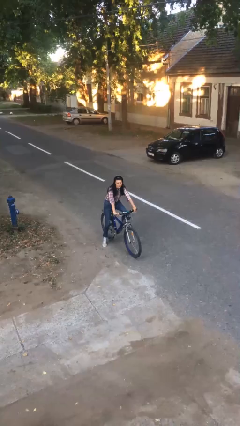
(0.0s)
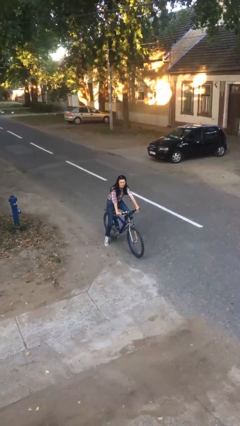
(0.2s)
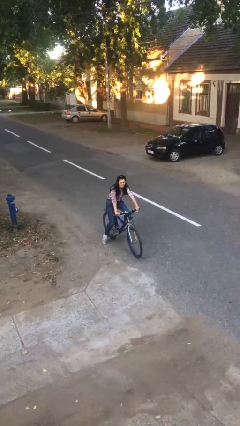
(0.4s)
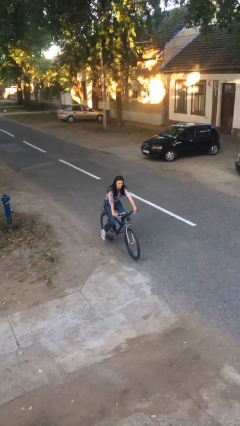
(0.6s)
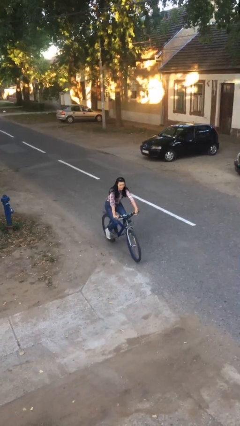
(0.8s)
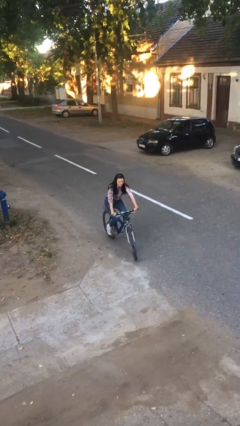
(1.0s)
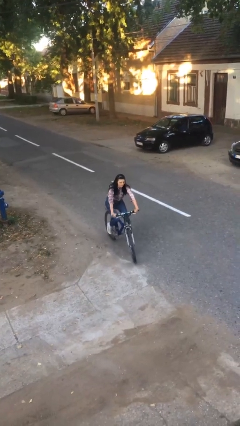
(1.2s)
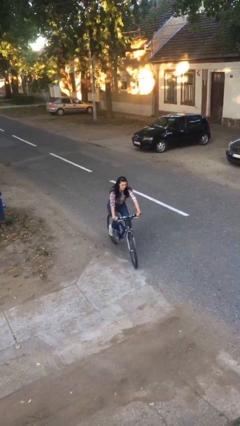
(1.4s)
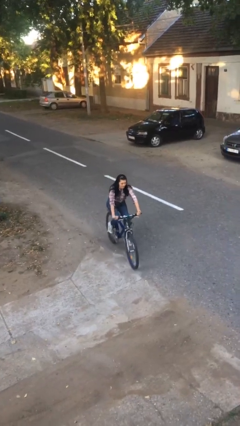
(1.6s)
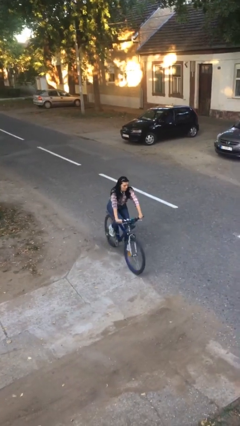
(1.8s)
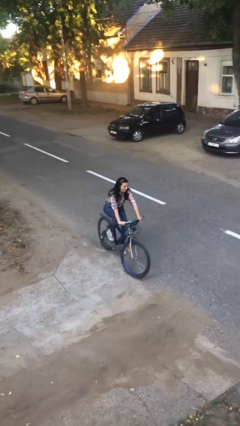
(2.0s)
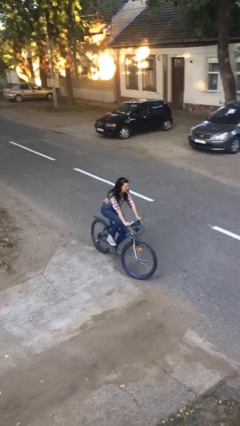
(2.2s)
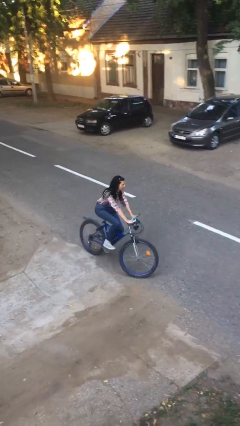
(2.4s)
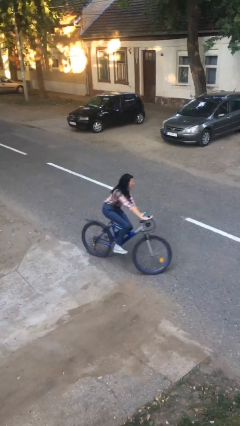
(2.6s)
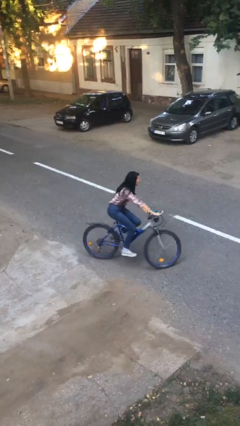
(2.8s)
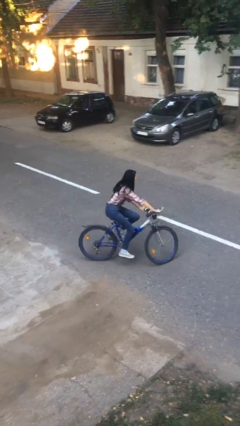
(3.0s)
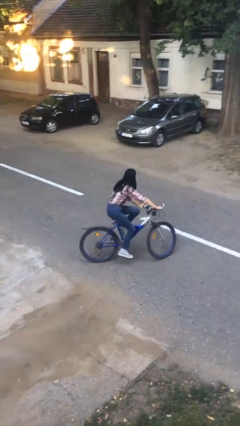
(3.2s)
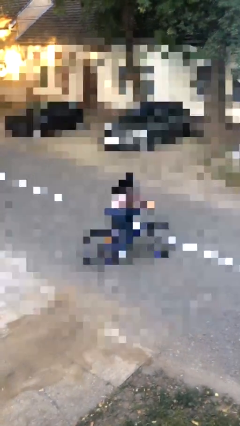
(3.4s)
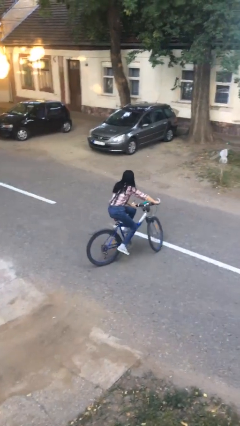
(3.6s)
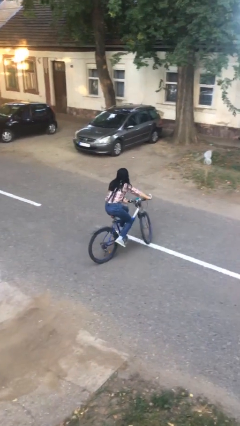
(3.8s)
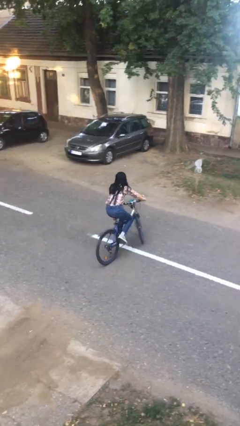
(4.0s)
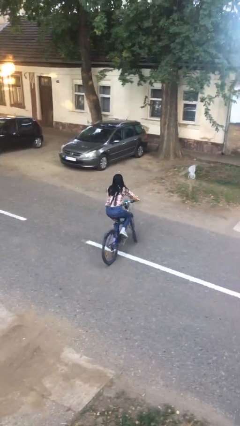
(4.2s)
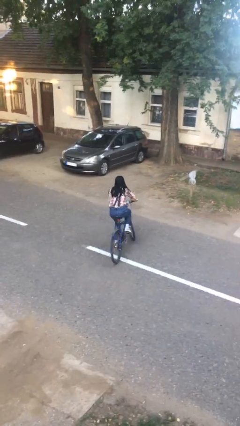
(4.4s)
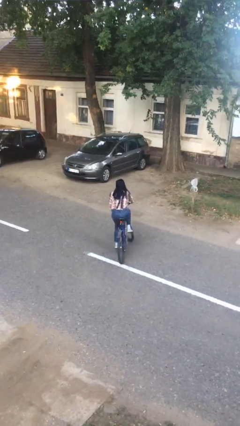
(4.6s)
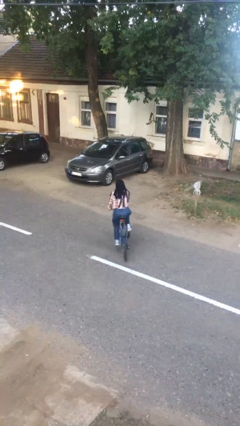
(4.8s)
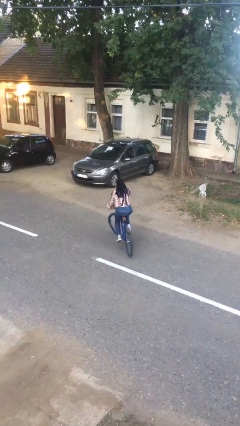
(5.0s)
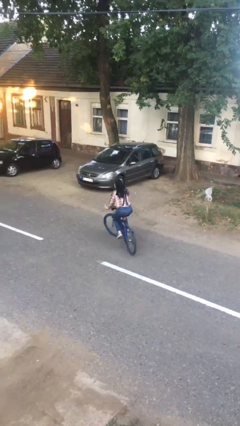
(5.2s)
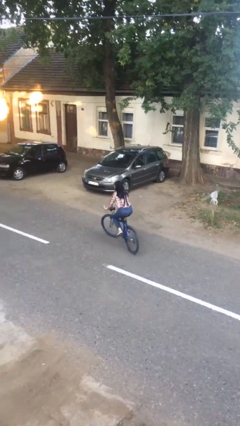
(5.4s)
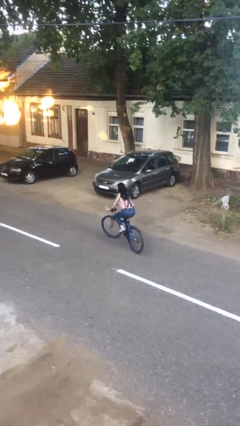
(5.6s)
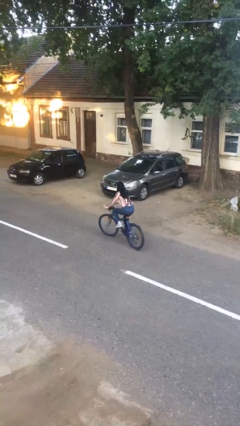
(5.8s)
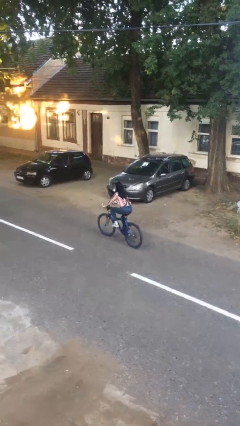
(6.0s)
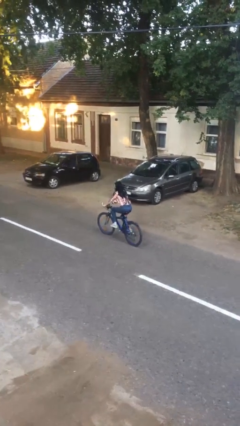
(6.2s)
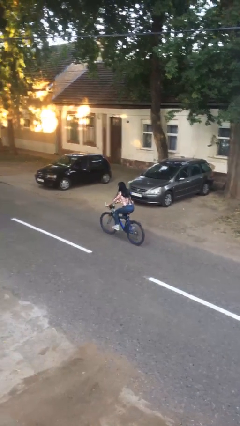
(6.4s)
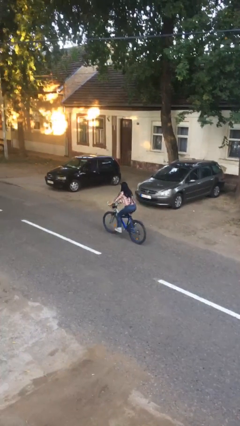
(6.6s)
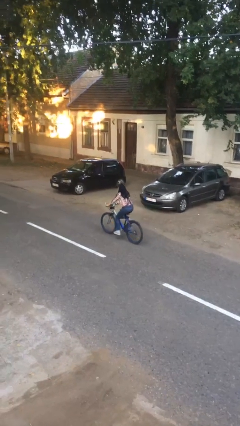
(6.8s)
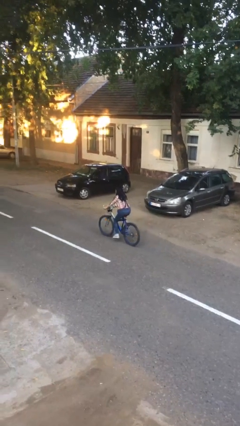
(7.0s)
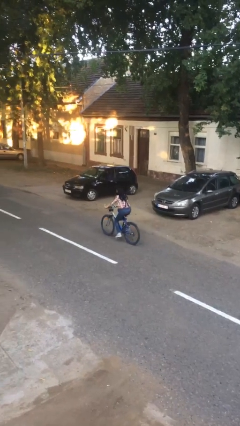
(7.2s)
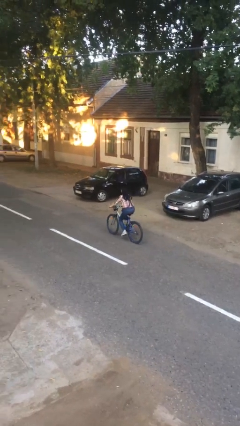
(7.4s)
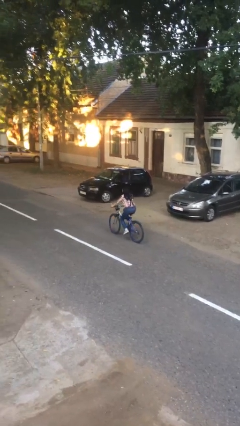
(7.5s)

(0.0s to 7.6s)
person rides bicycle

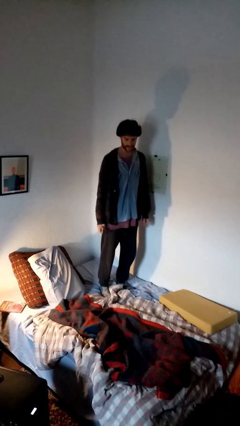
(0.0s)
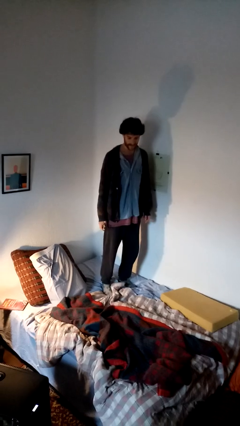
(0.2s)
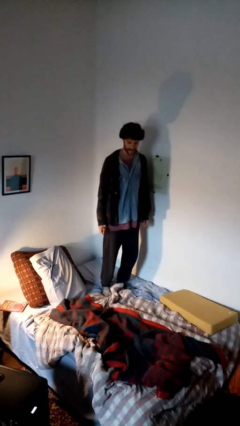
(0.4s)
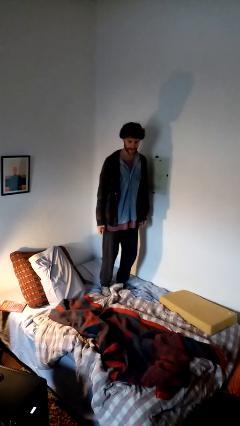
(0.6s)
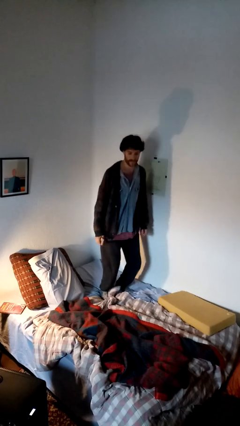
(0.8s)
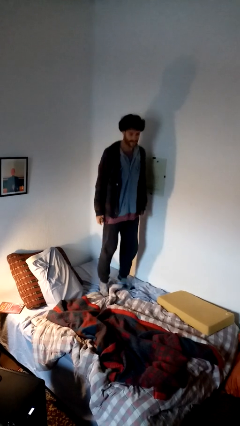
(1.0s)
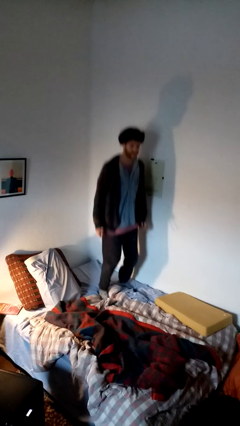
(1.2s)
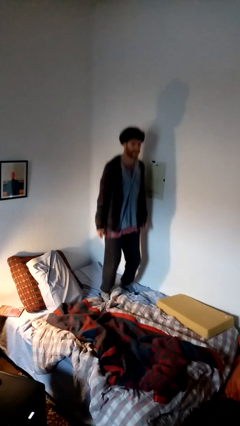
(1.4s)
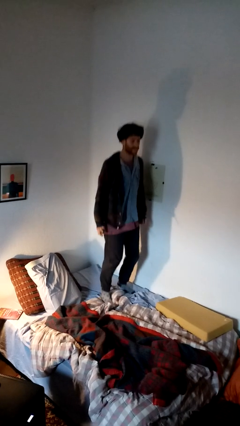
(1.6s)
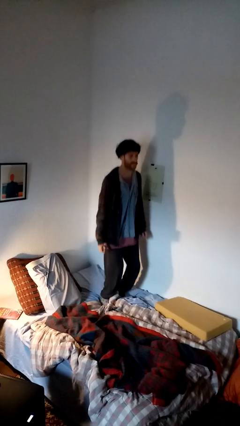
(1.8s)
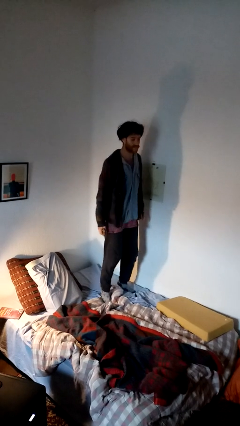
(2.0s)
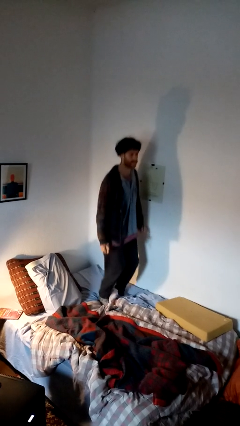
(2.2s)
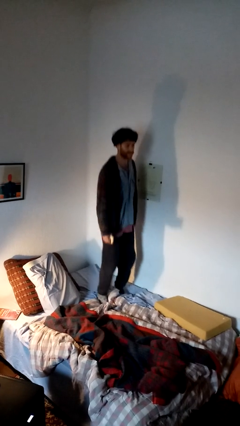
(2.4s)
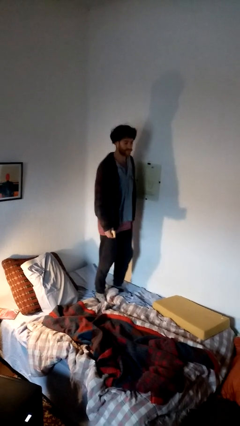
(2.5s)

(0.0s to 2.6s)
person jumps on bed

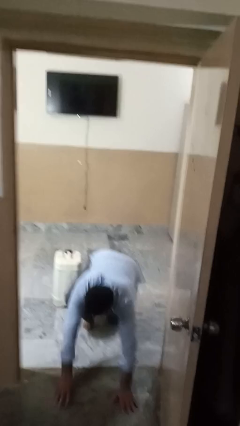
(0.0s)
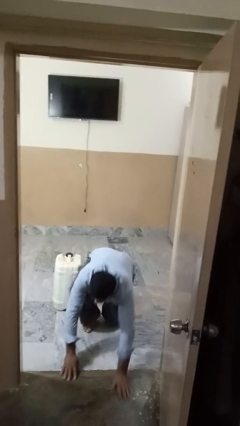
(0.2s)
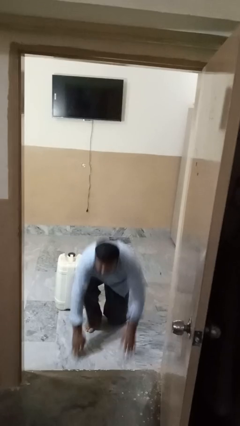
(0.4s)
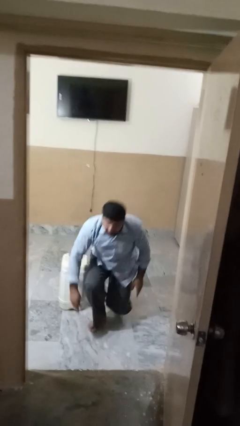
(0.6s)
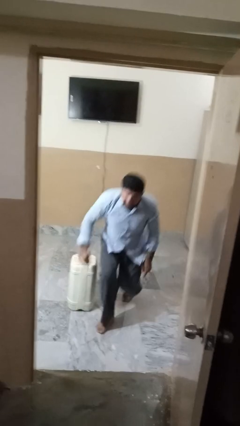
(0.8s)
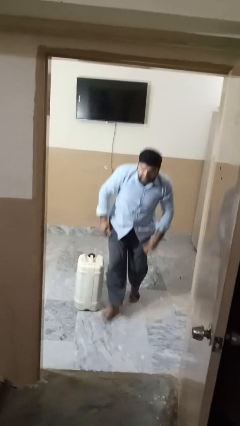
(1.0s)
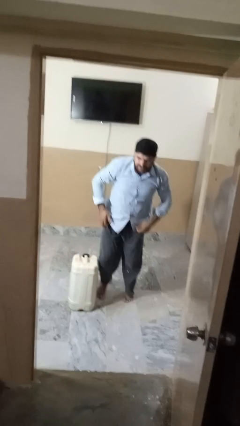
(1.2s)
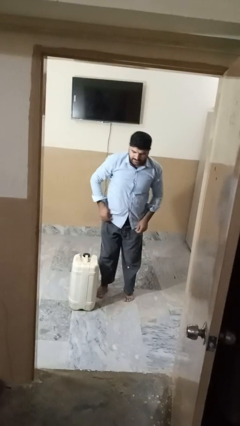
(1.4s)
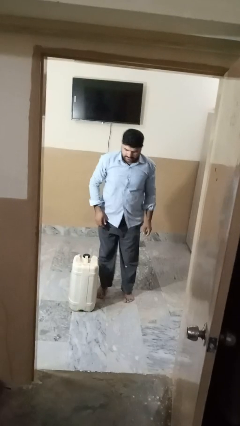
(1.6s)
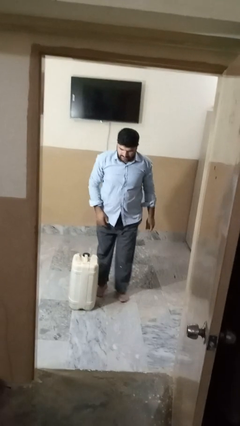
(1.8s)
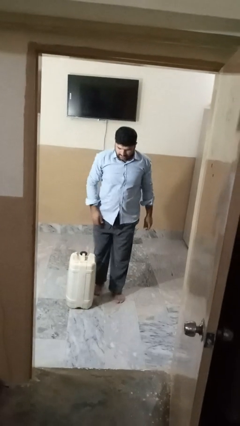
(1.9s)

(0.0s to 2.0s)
person stands up from floor

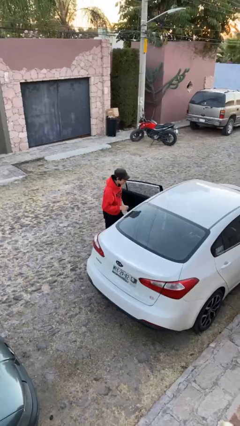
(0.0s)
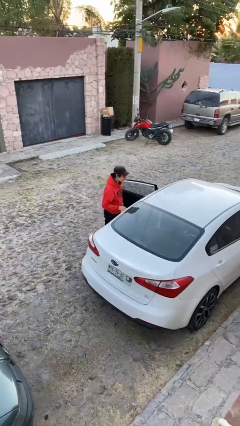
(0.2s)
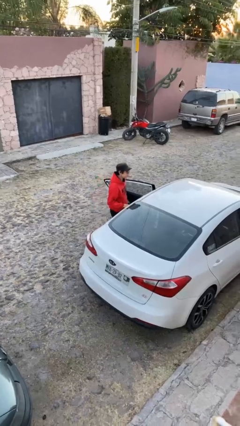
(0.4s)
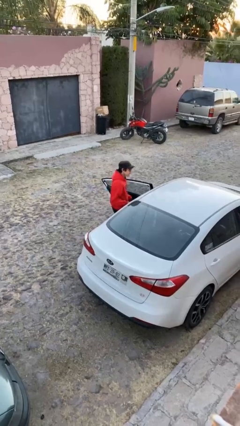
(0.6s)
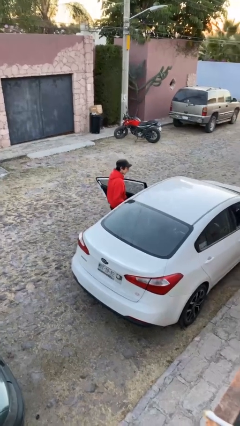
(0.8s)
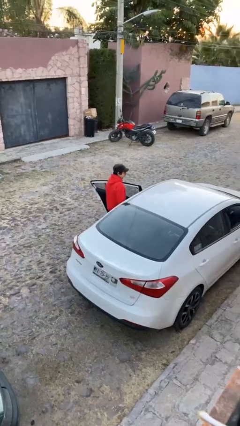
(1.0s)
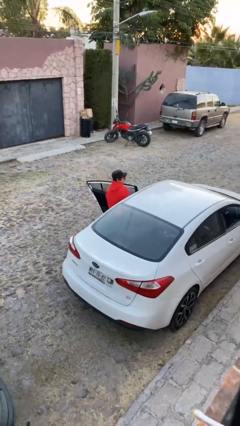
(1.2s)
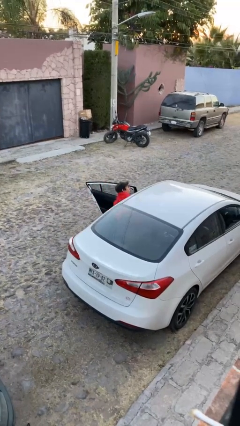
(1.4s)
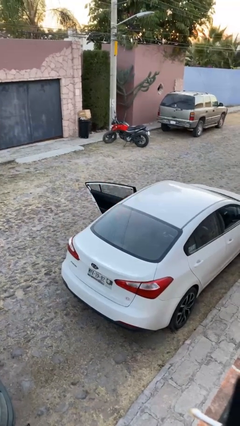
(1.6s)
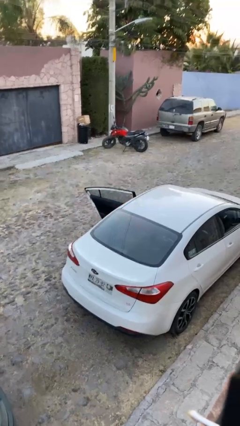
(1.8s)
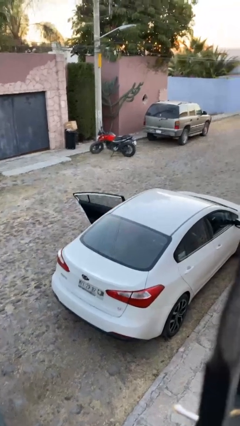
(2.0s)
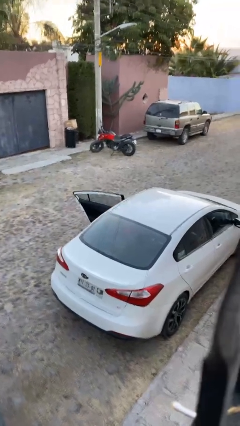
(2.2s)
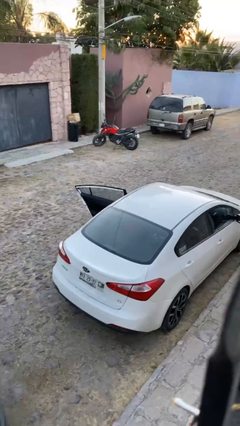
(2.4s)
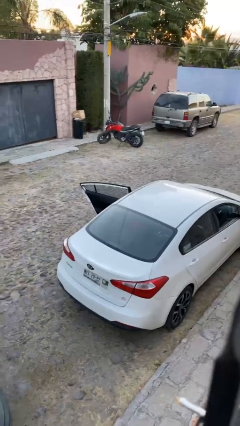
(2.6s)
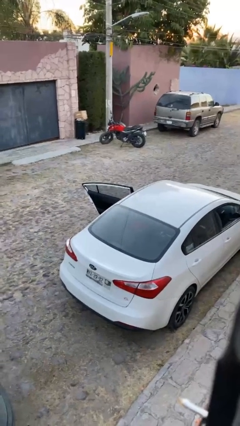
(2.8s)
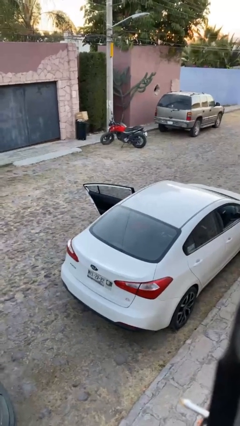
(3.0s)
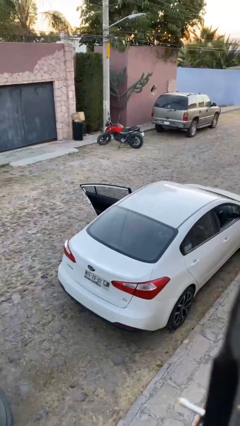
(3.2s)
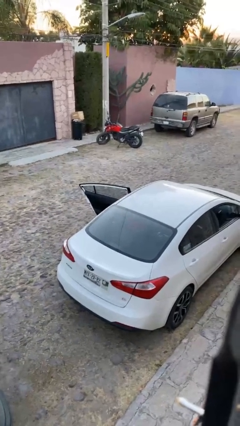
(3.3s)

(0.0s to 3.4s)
person enters car

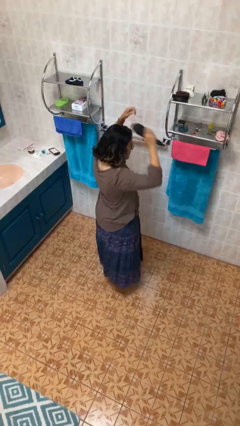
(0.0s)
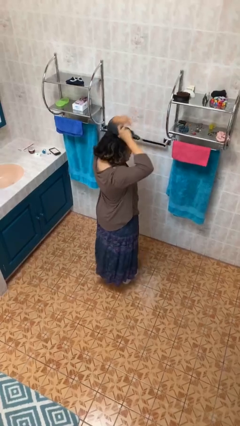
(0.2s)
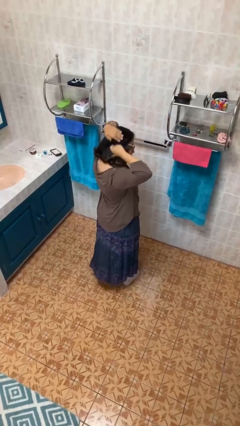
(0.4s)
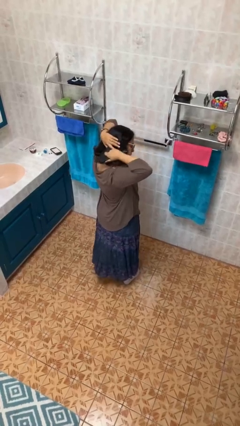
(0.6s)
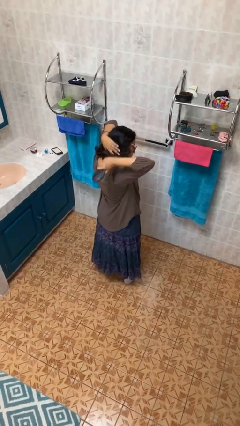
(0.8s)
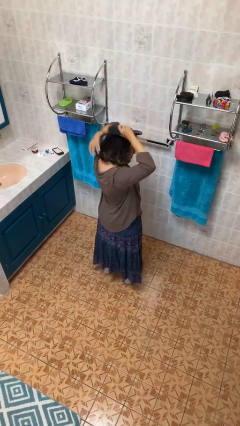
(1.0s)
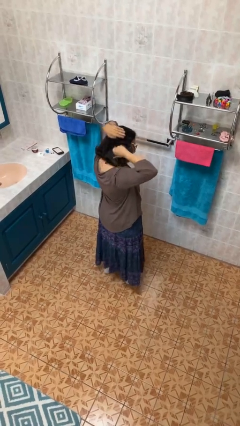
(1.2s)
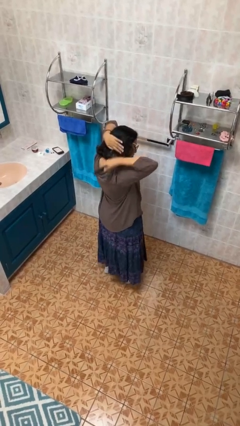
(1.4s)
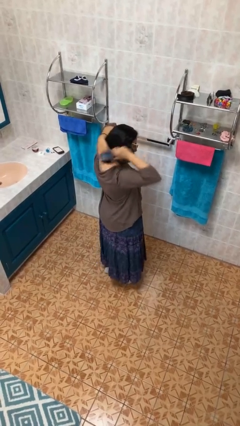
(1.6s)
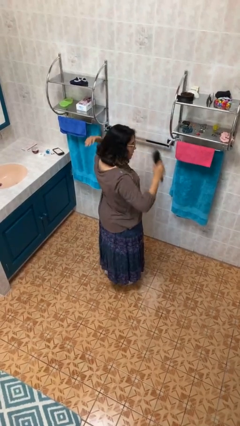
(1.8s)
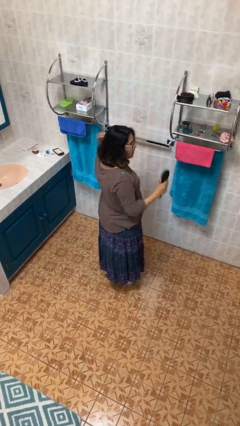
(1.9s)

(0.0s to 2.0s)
person brushes hair

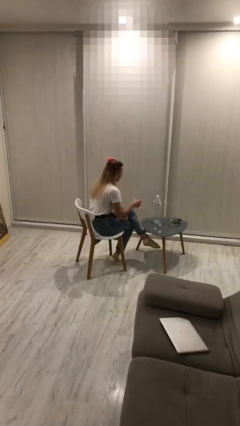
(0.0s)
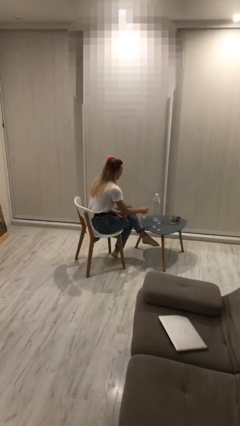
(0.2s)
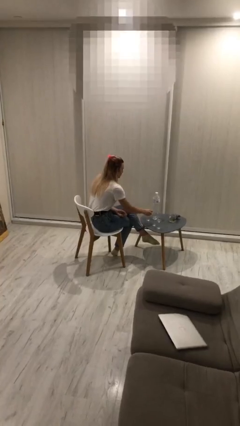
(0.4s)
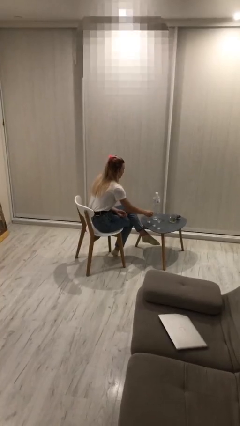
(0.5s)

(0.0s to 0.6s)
person puts down object on table
